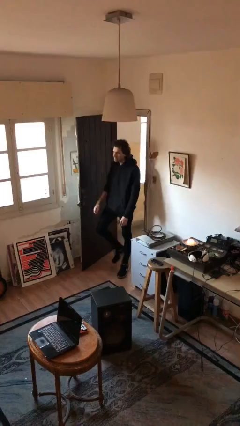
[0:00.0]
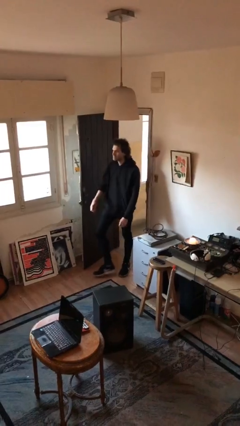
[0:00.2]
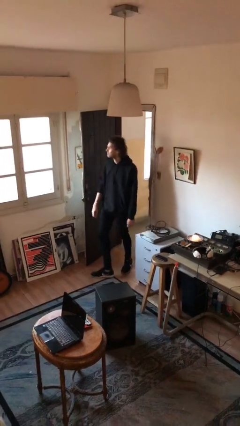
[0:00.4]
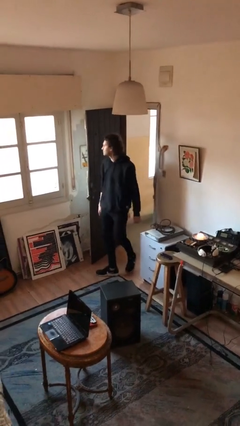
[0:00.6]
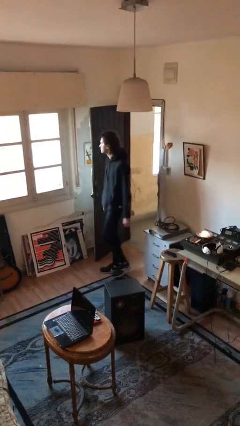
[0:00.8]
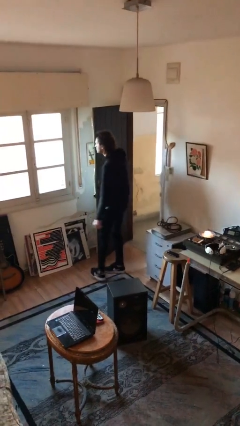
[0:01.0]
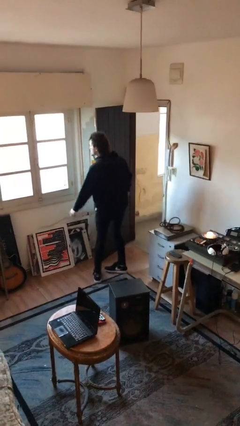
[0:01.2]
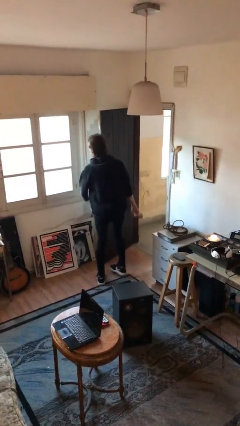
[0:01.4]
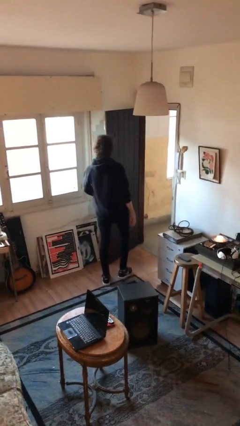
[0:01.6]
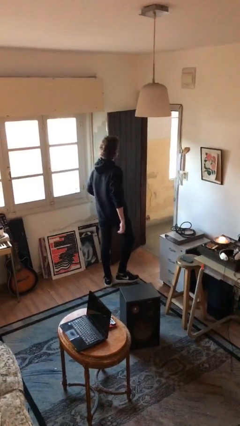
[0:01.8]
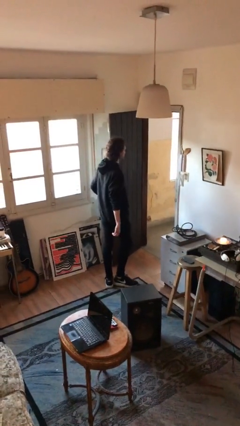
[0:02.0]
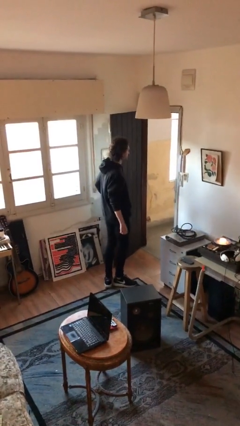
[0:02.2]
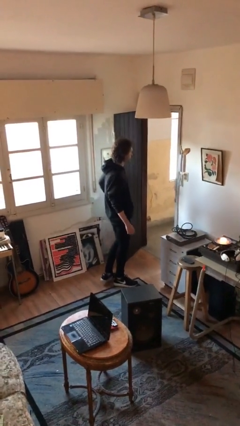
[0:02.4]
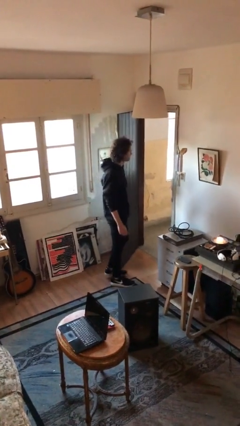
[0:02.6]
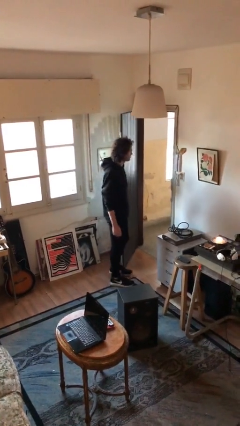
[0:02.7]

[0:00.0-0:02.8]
person enters scene through structure

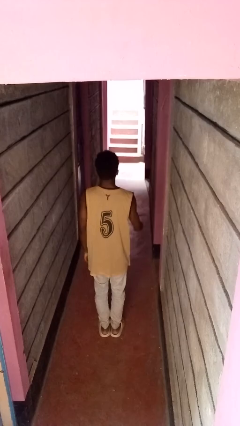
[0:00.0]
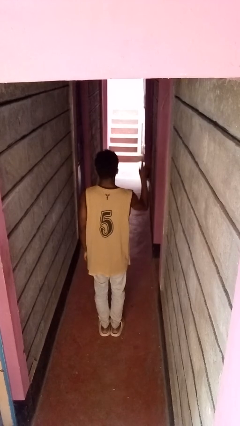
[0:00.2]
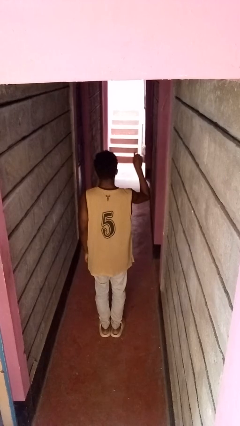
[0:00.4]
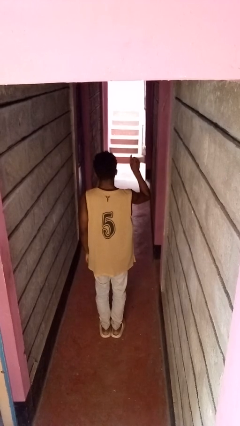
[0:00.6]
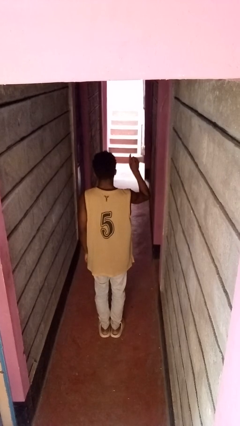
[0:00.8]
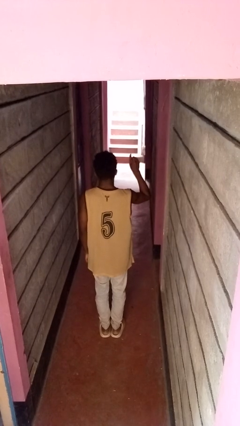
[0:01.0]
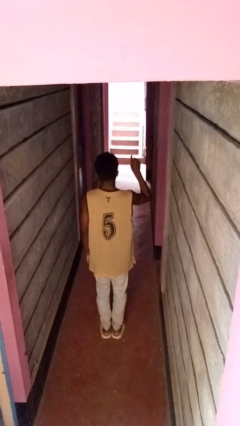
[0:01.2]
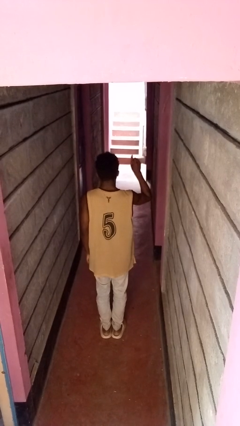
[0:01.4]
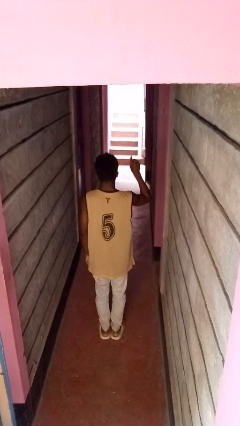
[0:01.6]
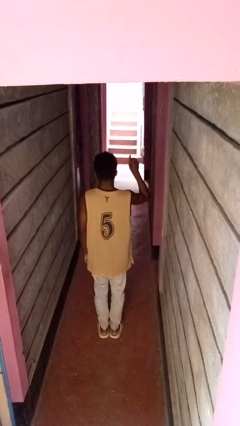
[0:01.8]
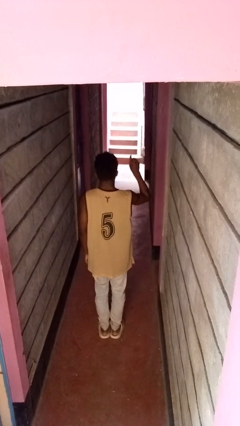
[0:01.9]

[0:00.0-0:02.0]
person gestures number one

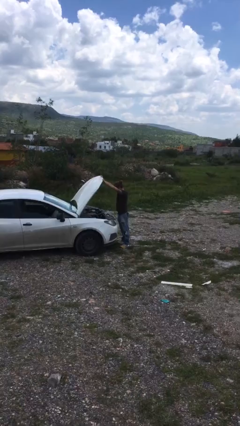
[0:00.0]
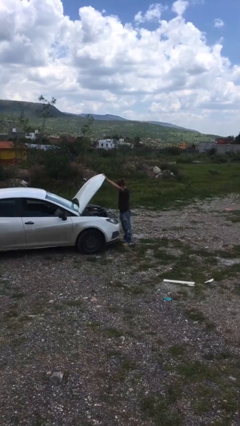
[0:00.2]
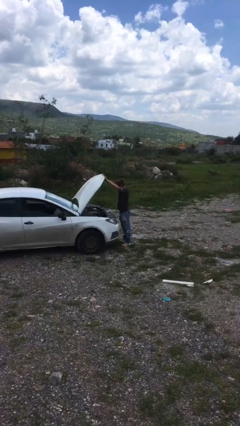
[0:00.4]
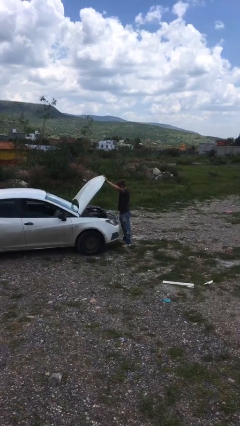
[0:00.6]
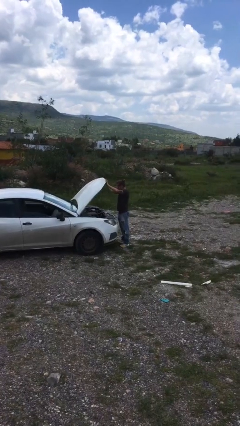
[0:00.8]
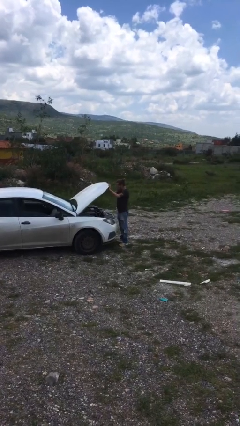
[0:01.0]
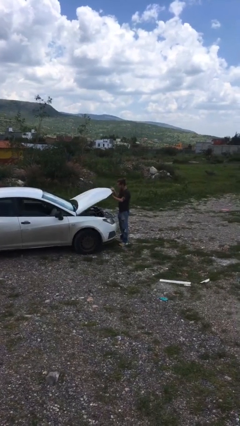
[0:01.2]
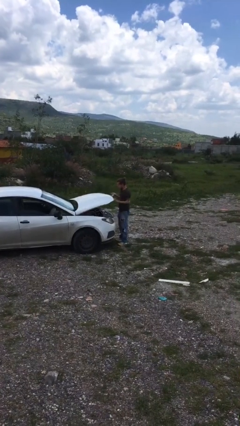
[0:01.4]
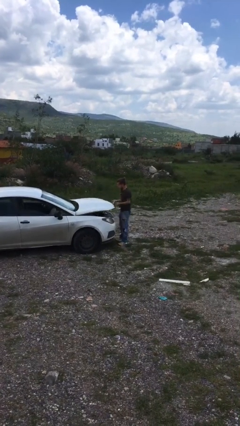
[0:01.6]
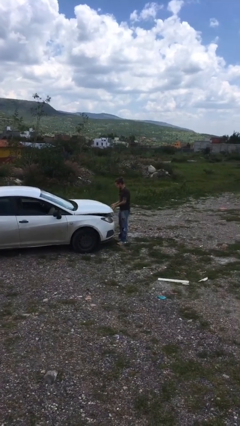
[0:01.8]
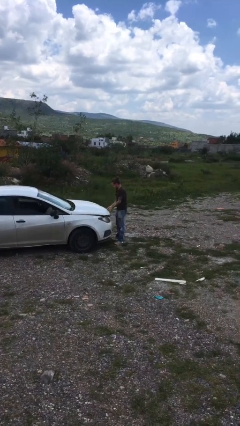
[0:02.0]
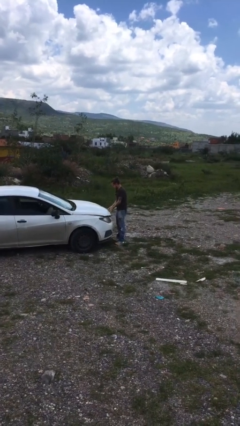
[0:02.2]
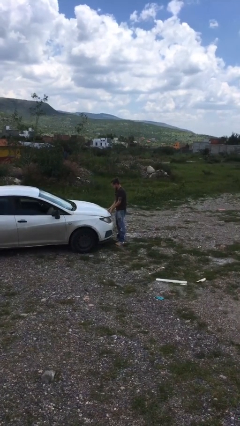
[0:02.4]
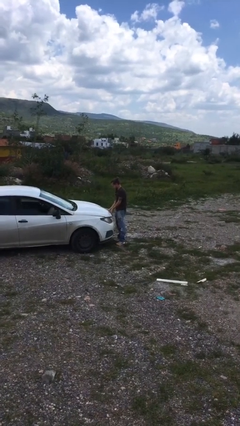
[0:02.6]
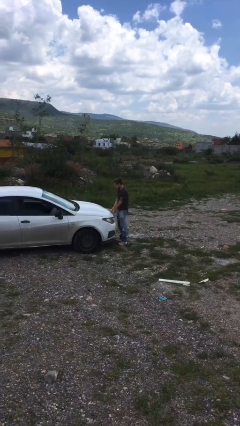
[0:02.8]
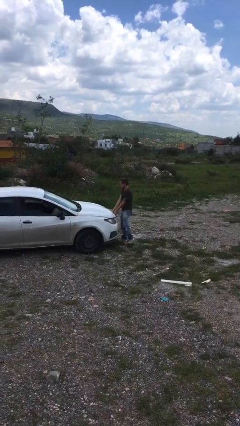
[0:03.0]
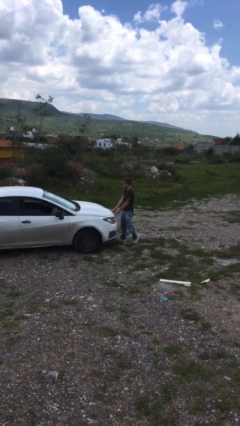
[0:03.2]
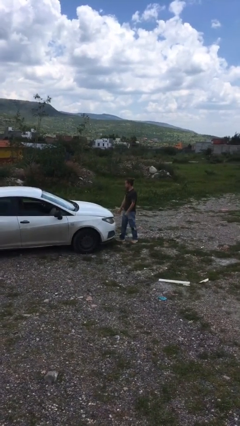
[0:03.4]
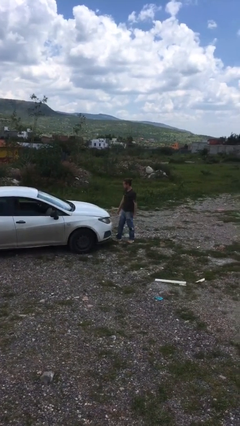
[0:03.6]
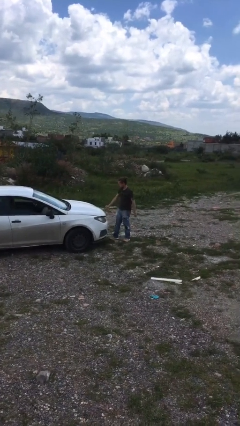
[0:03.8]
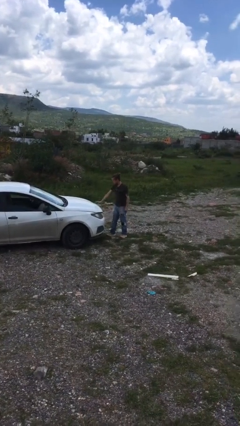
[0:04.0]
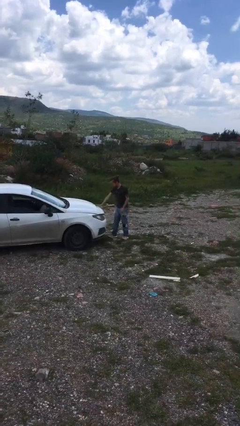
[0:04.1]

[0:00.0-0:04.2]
person closes car hood

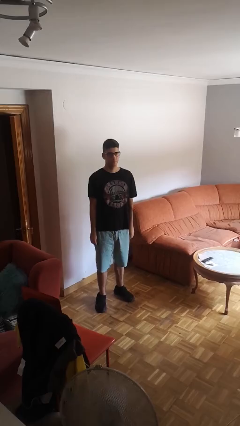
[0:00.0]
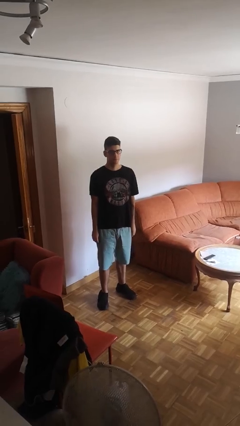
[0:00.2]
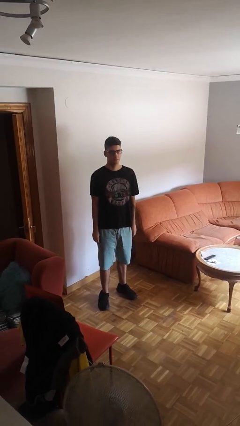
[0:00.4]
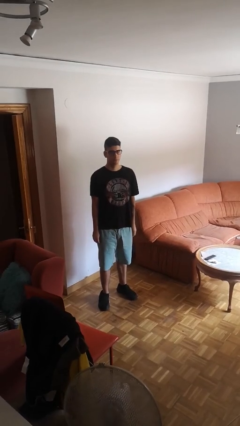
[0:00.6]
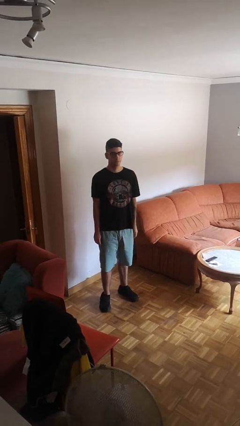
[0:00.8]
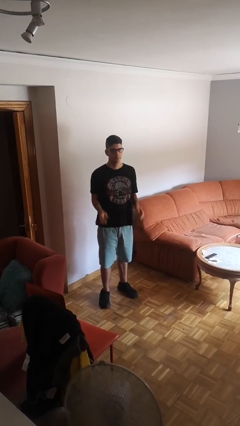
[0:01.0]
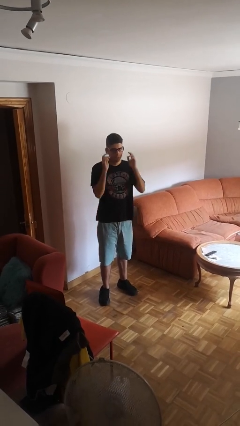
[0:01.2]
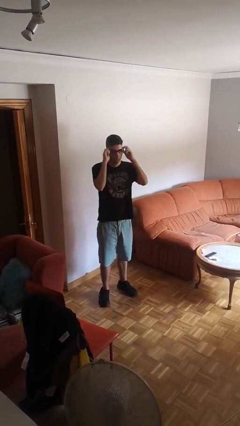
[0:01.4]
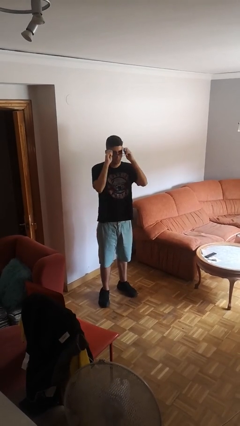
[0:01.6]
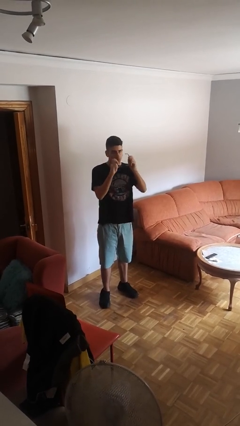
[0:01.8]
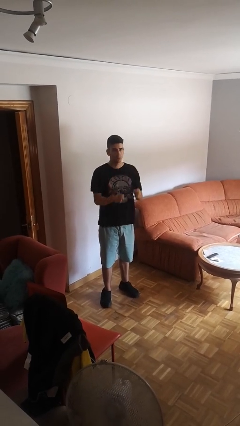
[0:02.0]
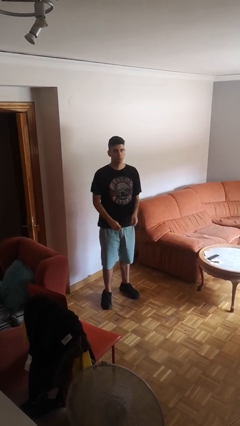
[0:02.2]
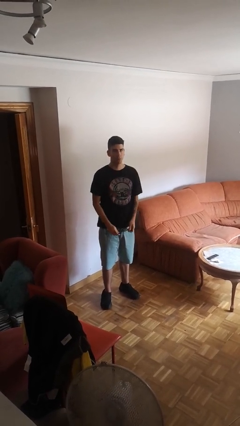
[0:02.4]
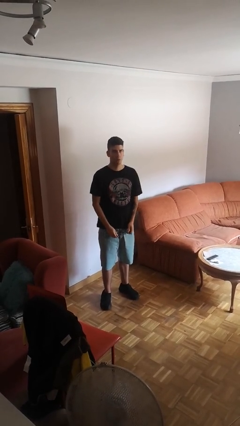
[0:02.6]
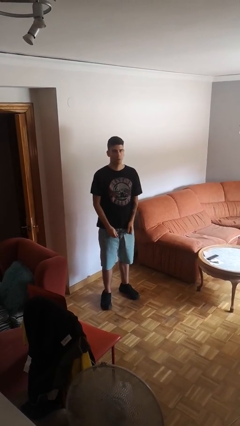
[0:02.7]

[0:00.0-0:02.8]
person takes off glasses

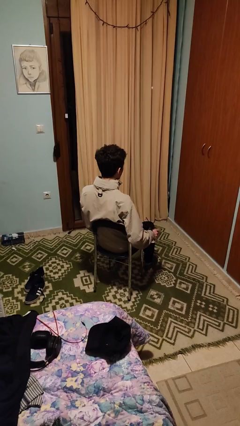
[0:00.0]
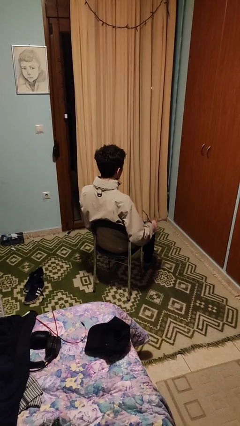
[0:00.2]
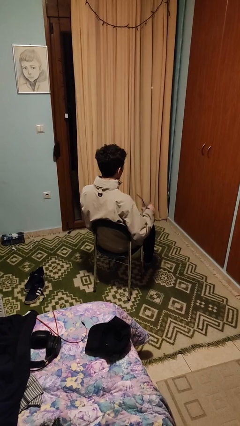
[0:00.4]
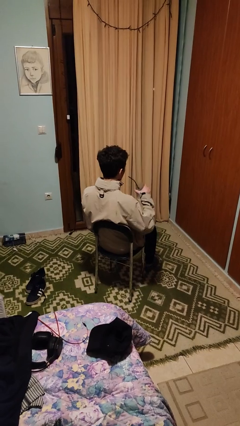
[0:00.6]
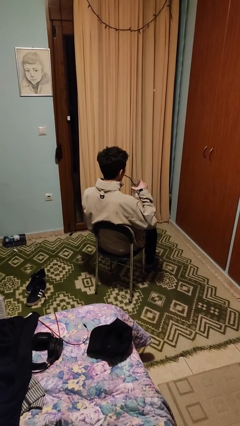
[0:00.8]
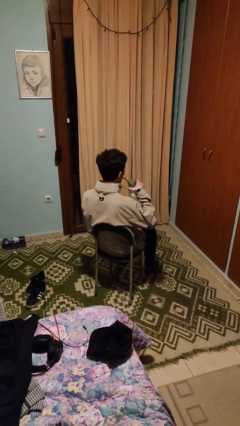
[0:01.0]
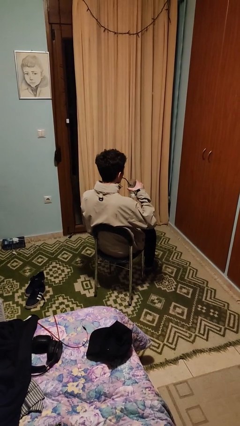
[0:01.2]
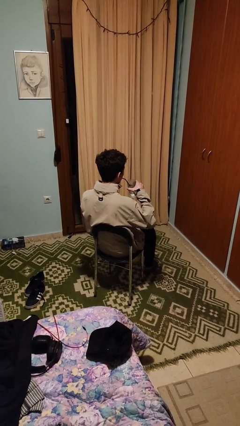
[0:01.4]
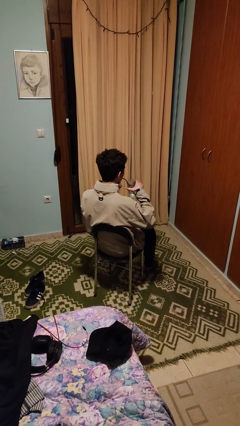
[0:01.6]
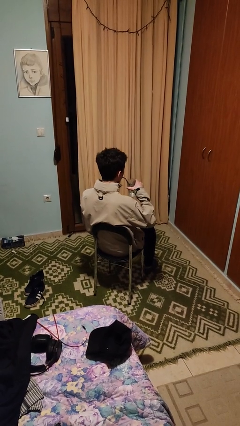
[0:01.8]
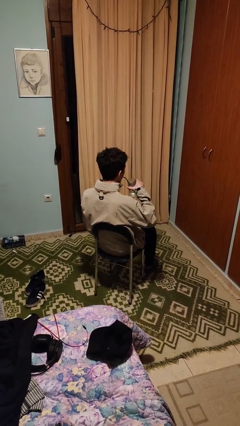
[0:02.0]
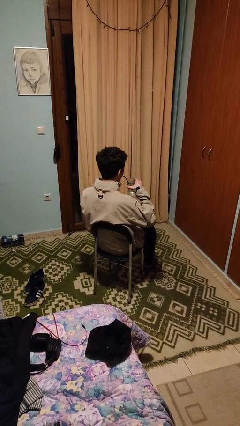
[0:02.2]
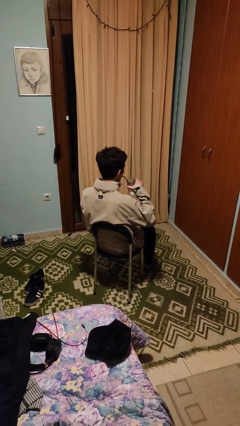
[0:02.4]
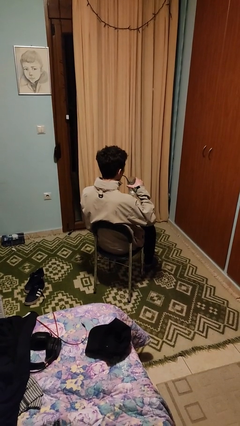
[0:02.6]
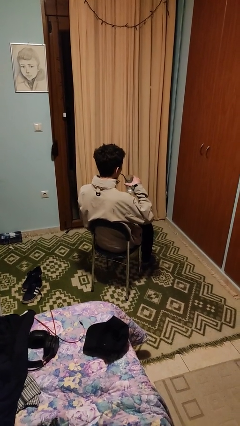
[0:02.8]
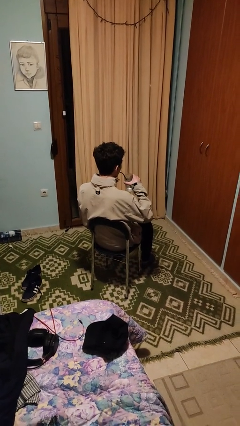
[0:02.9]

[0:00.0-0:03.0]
person drinks from straw

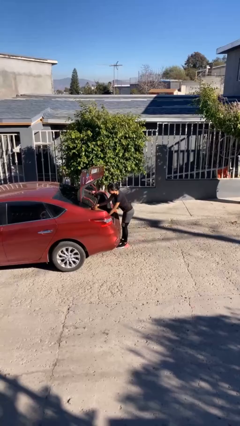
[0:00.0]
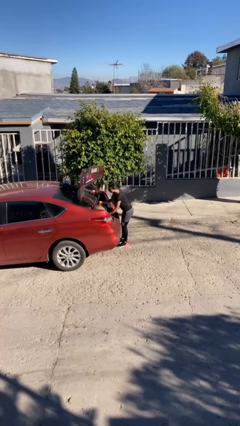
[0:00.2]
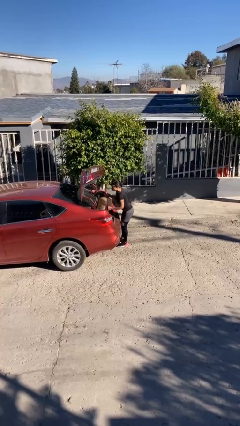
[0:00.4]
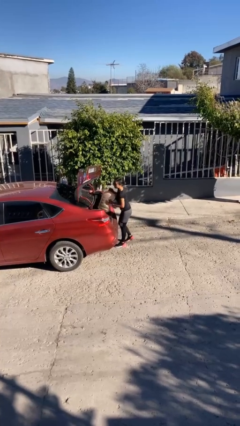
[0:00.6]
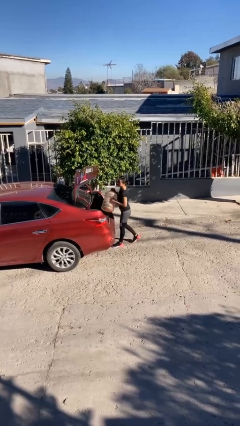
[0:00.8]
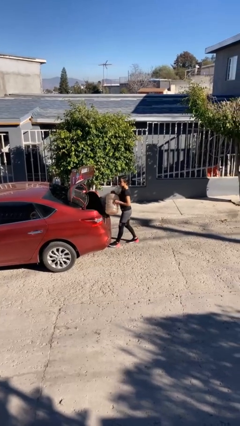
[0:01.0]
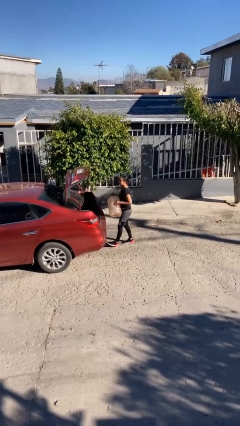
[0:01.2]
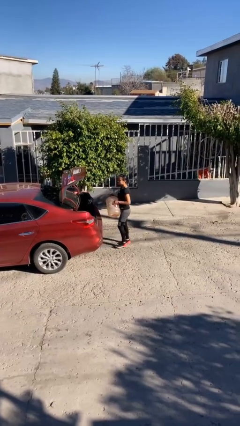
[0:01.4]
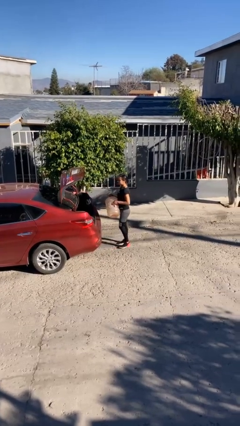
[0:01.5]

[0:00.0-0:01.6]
person unloads car

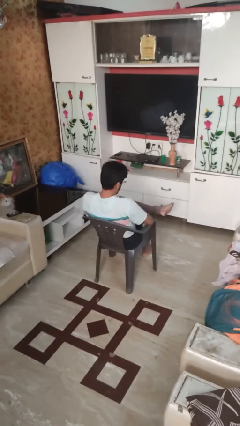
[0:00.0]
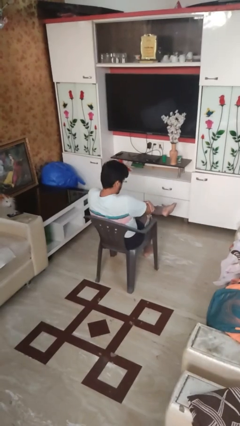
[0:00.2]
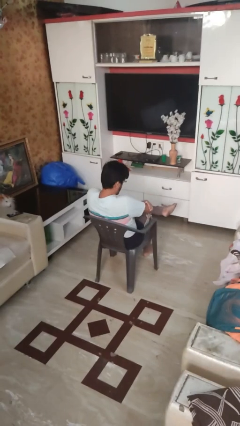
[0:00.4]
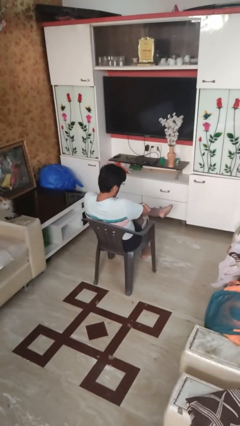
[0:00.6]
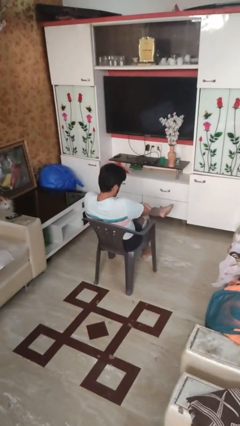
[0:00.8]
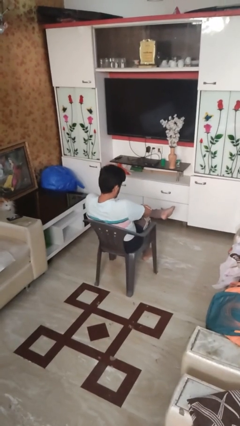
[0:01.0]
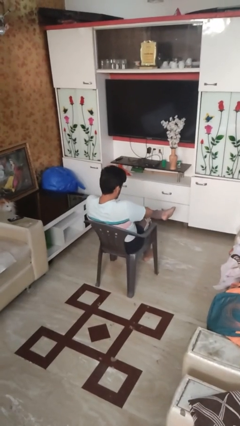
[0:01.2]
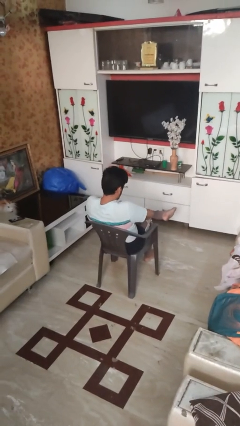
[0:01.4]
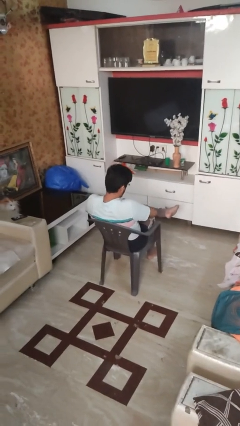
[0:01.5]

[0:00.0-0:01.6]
person swats bug
